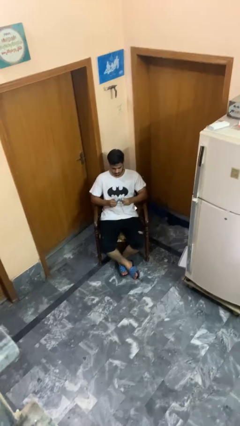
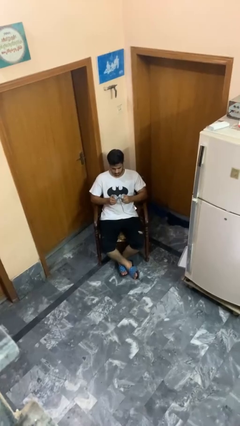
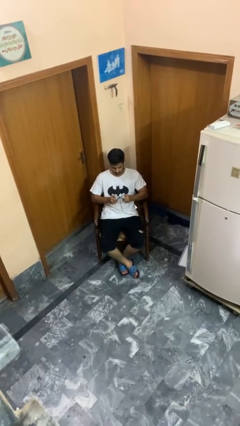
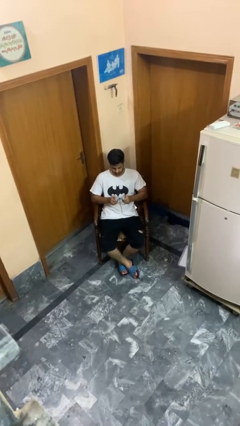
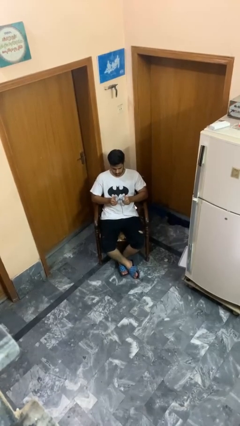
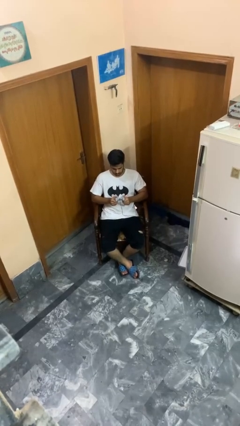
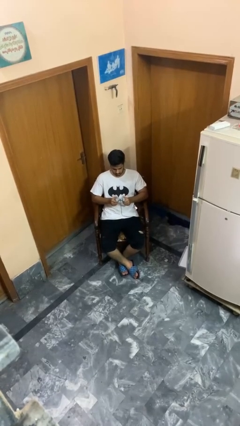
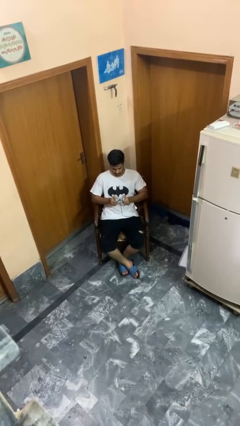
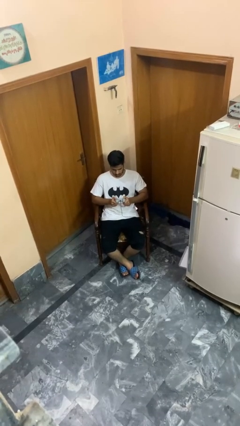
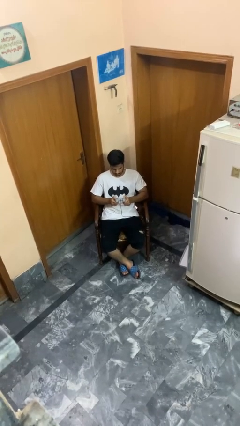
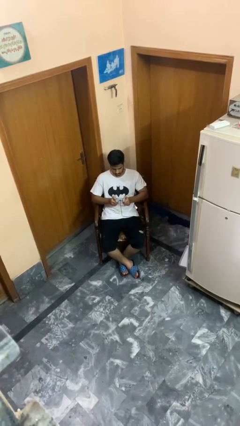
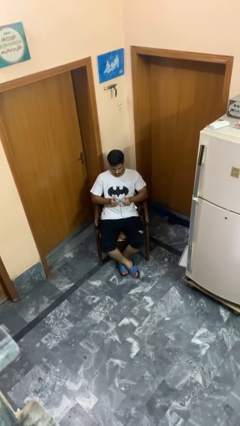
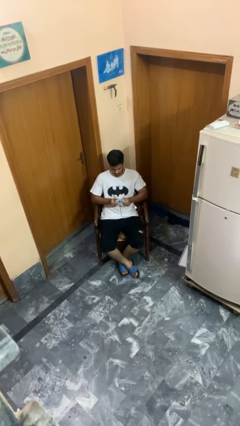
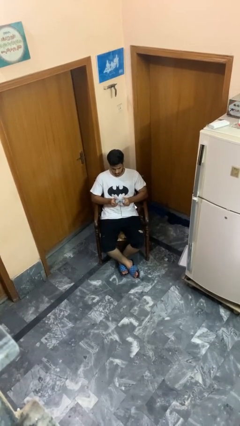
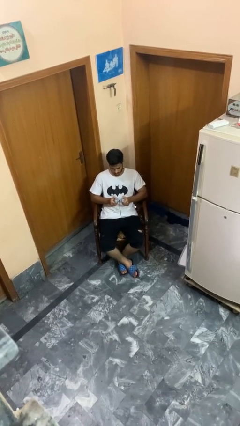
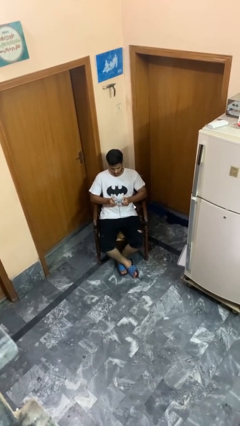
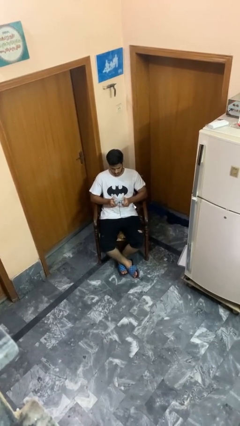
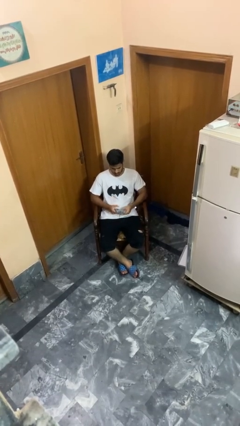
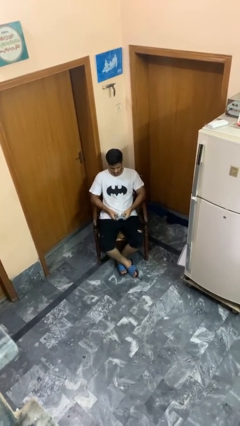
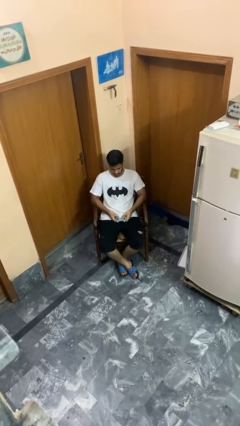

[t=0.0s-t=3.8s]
person interacts with handheld game

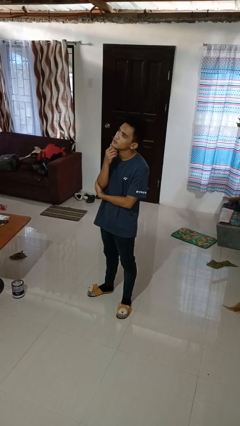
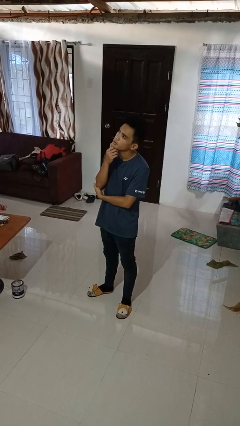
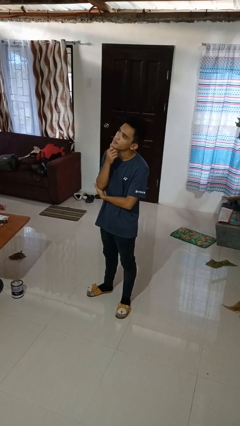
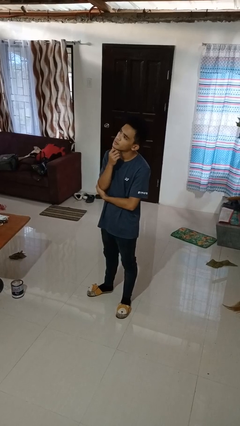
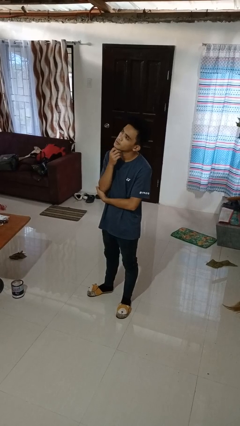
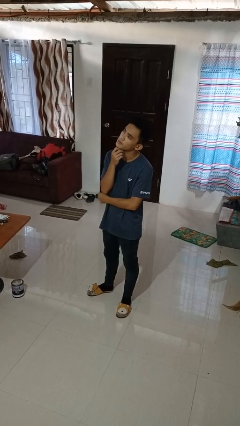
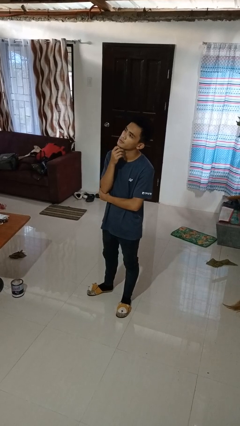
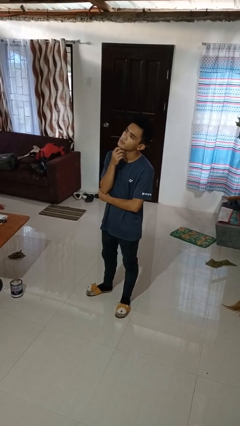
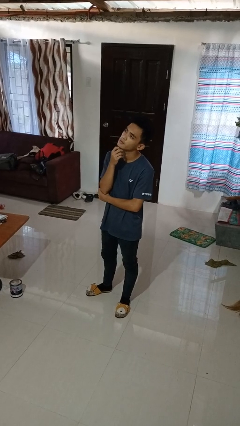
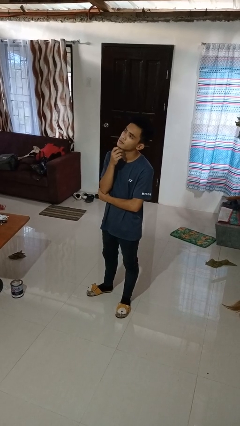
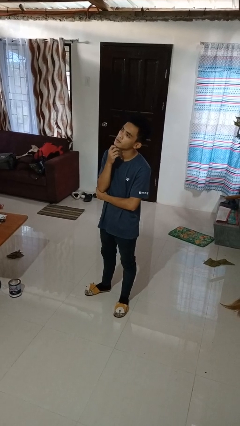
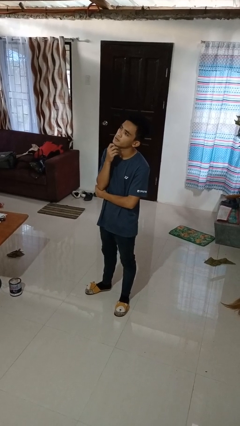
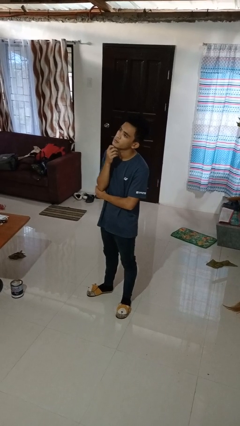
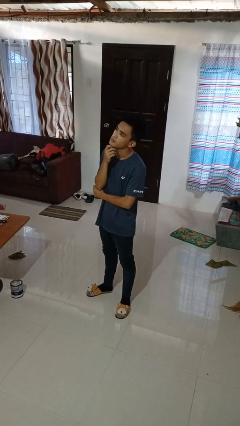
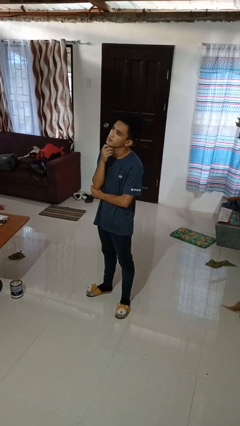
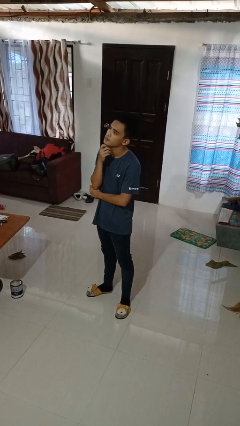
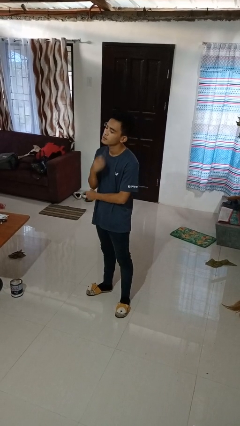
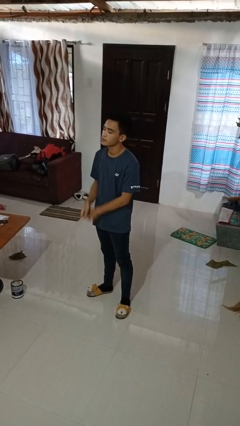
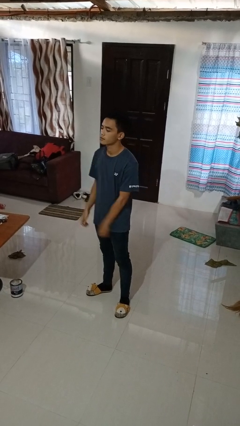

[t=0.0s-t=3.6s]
person strokes chin

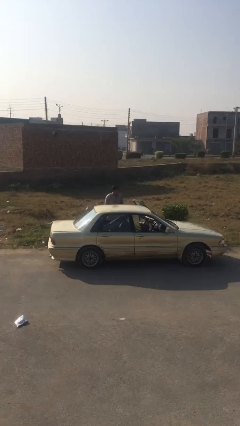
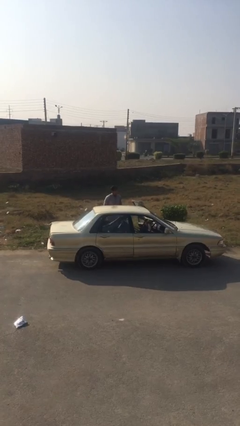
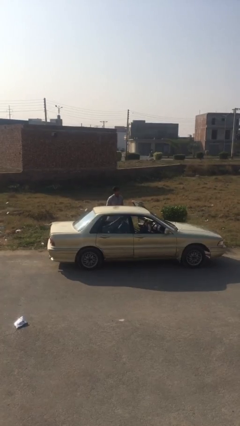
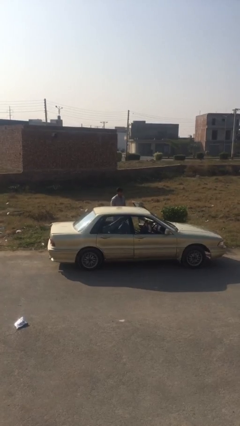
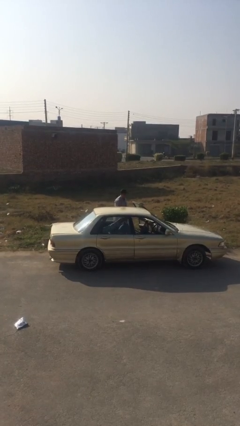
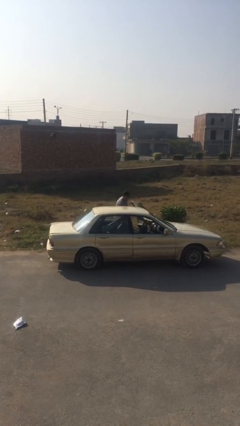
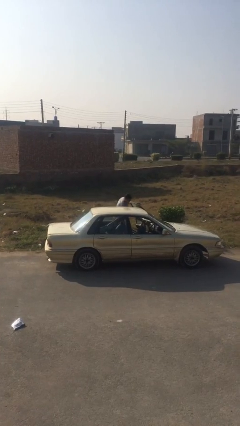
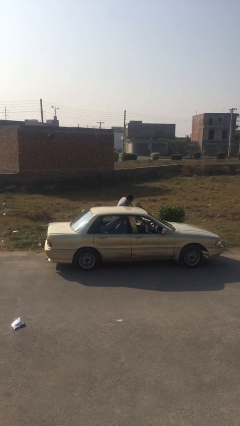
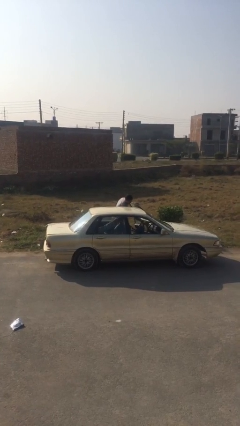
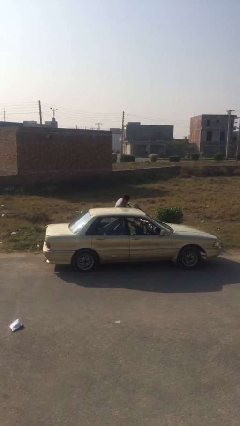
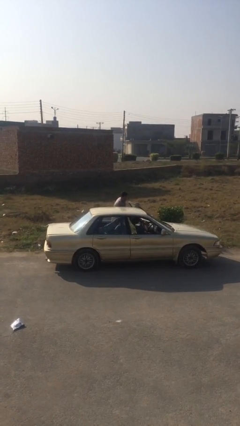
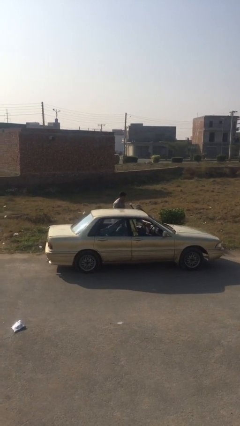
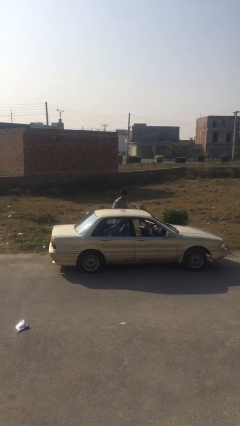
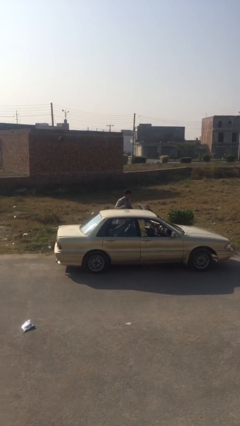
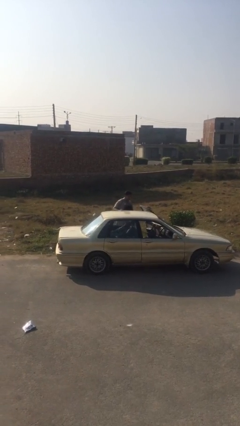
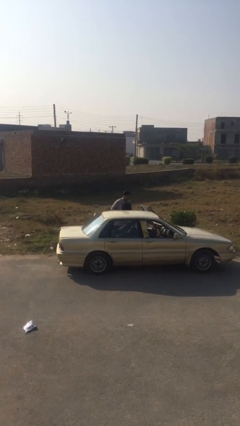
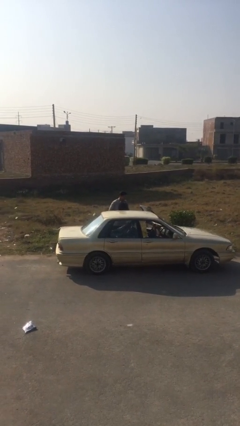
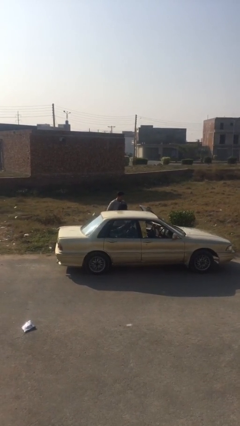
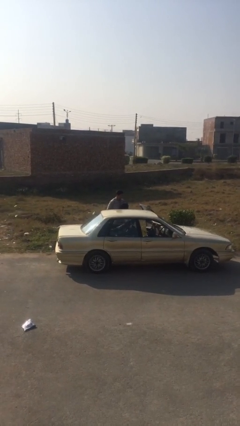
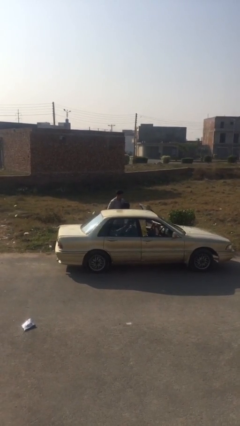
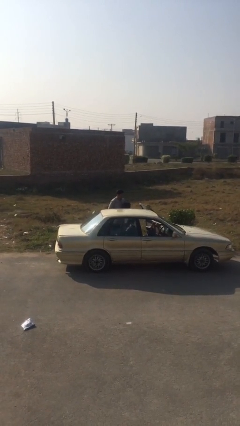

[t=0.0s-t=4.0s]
person unloads car

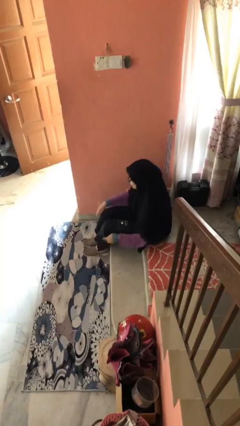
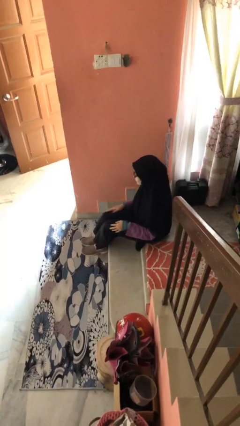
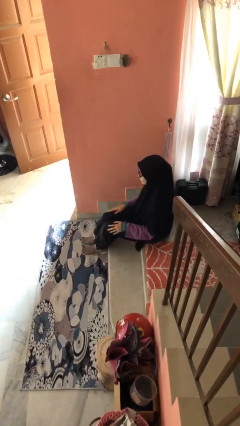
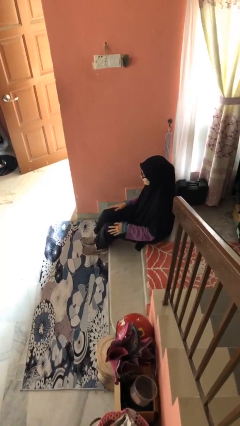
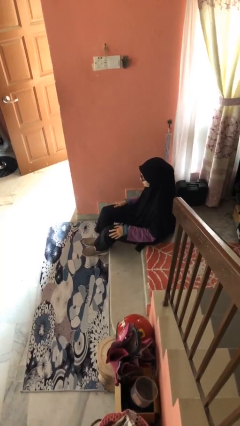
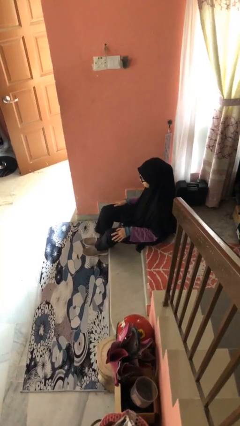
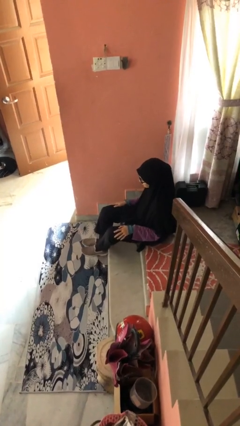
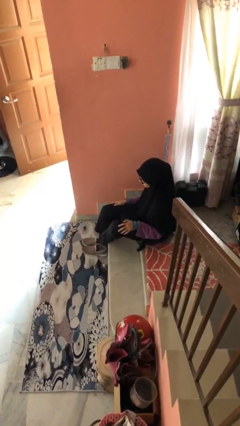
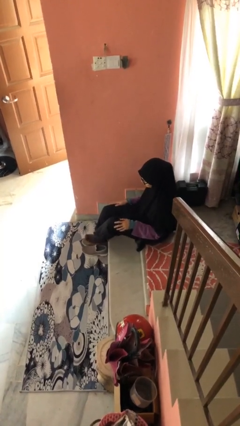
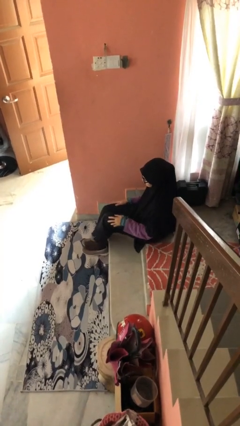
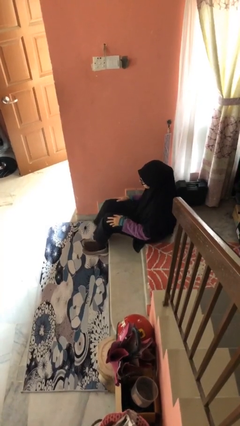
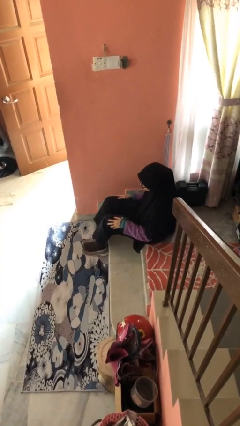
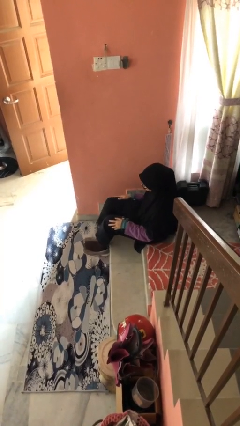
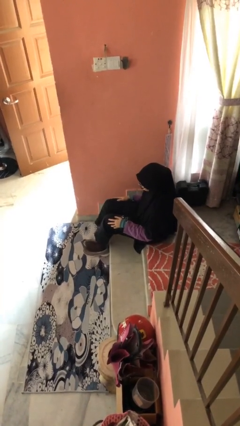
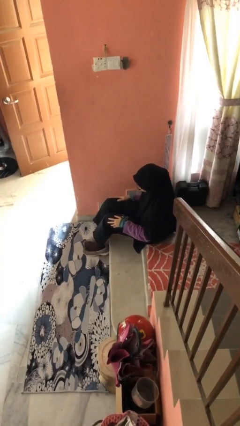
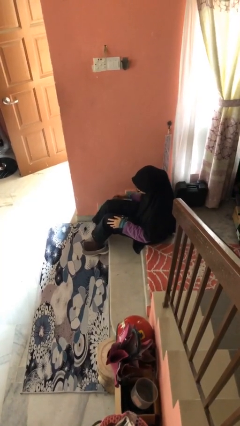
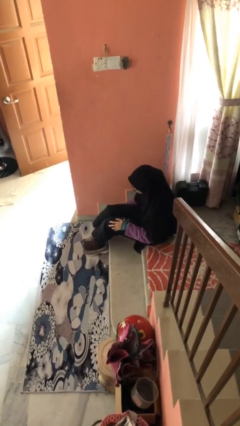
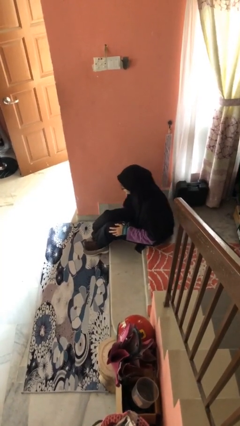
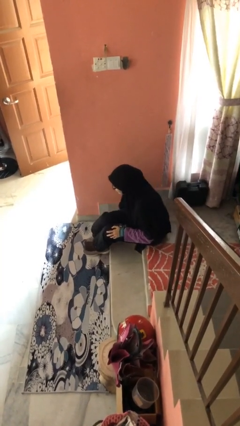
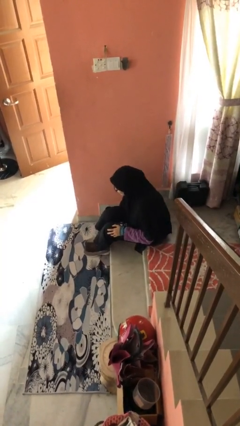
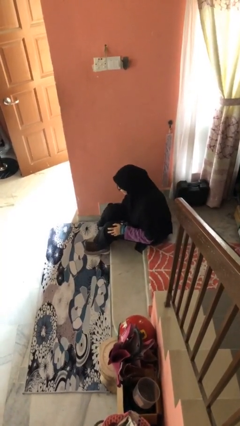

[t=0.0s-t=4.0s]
person takes off shoes

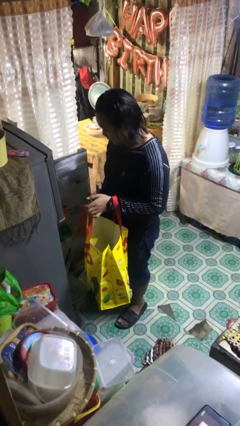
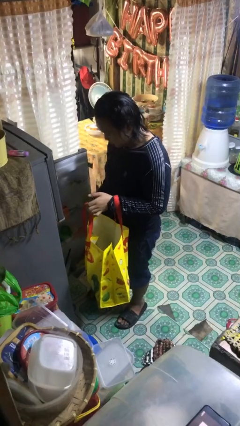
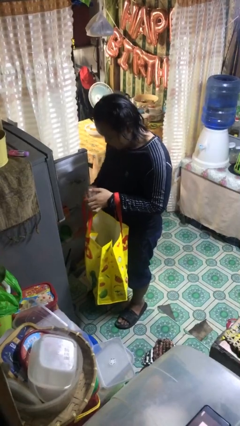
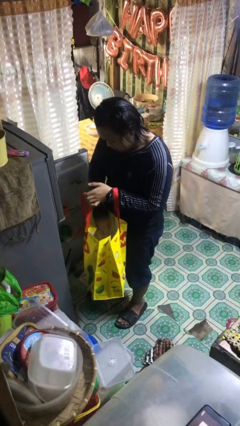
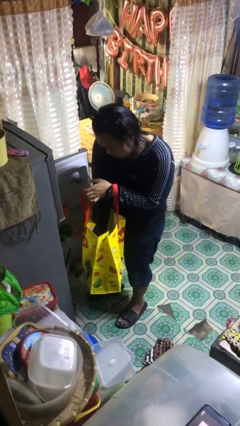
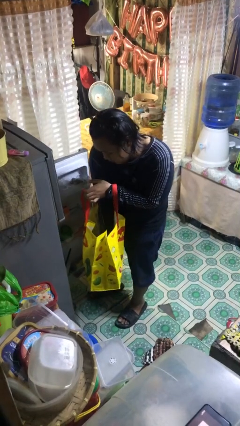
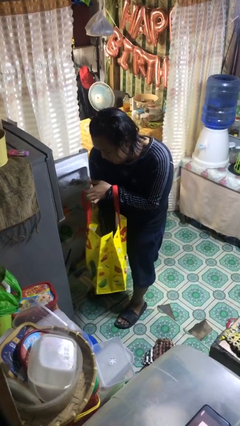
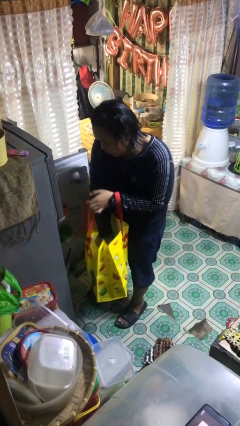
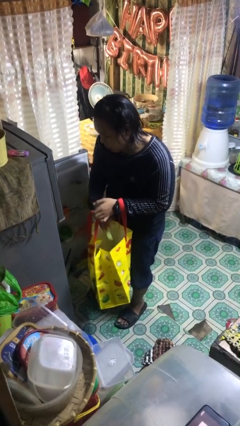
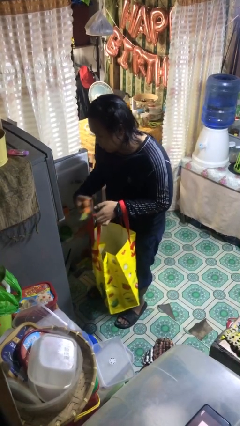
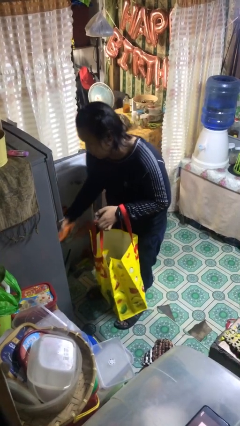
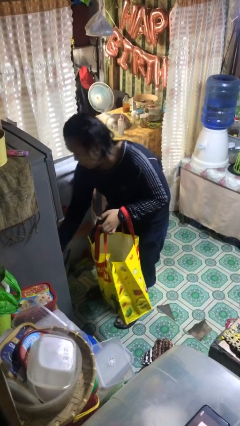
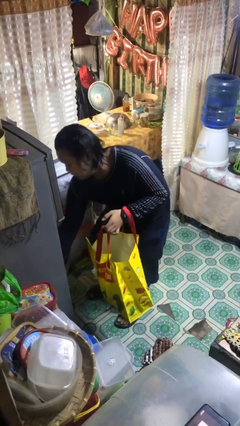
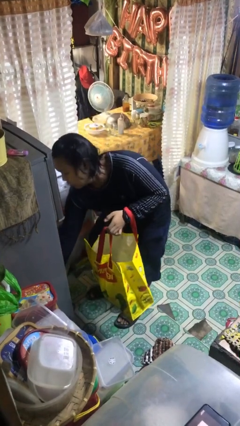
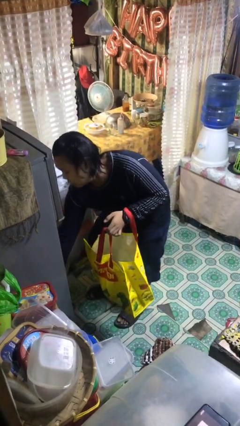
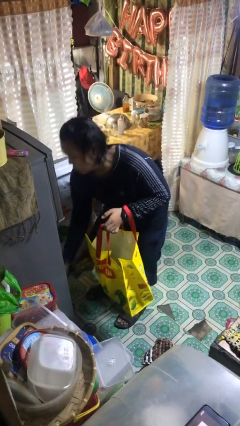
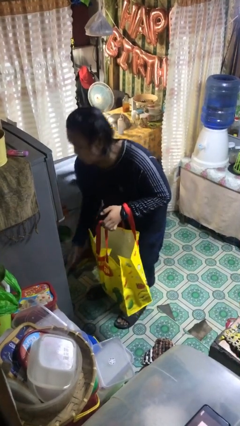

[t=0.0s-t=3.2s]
person loads groceries into refrigerator
